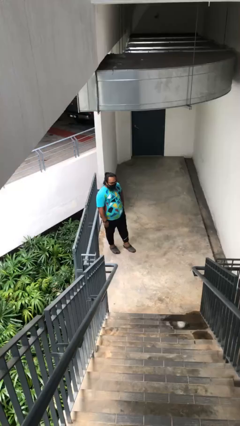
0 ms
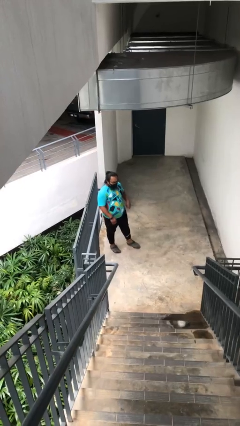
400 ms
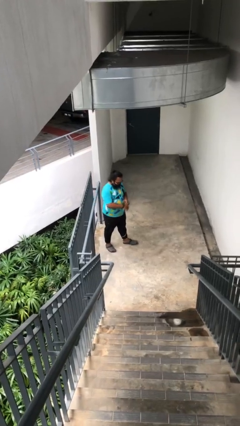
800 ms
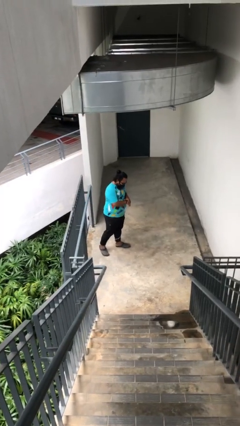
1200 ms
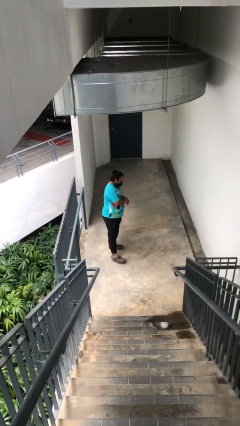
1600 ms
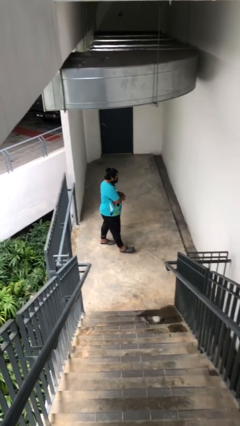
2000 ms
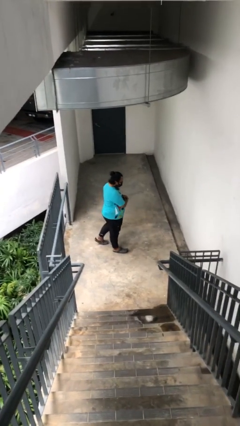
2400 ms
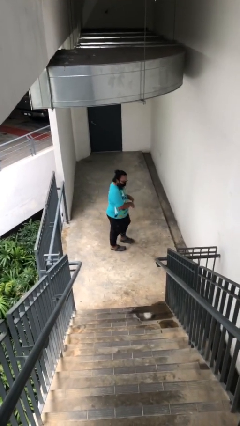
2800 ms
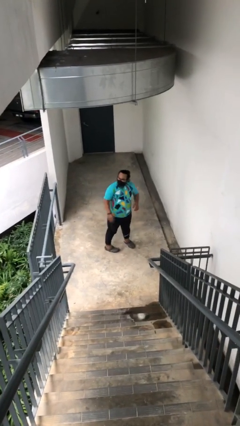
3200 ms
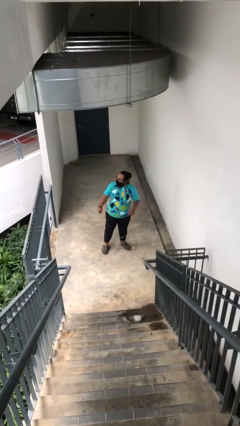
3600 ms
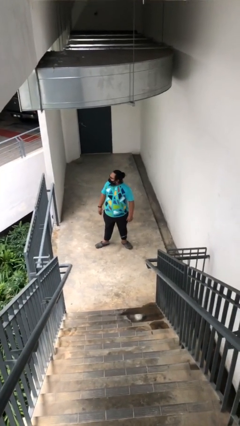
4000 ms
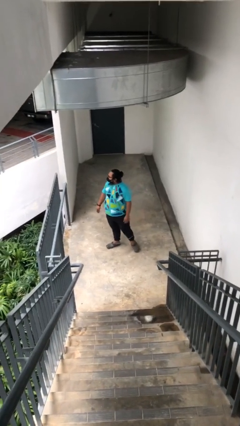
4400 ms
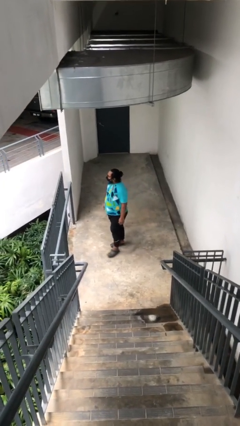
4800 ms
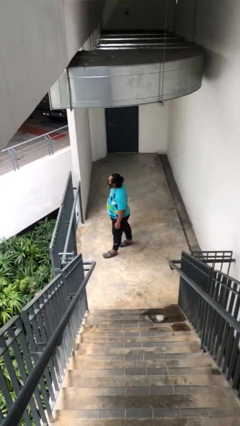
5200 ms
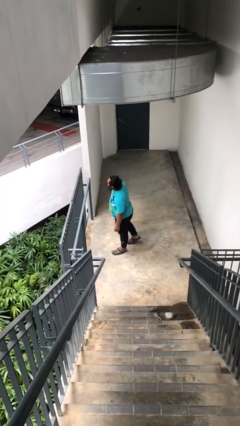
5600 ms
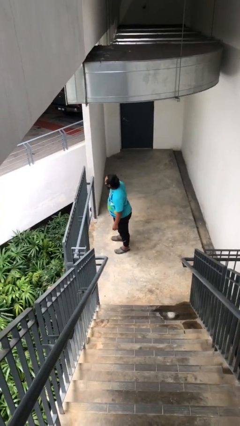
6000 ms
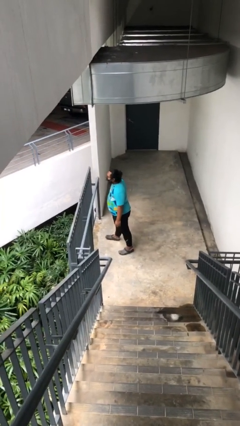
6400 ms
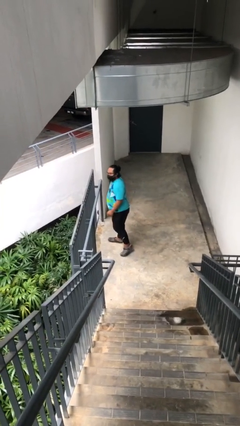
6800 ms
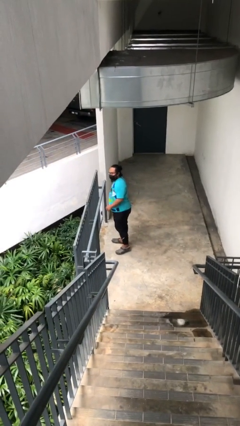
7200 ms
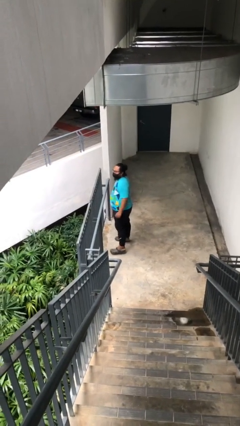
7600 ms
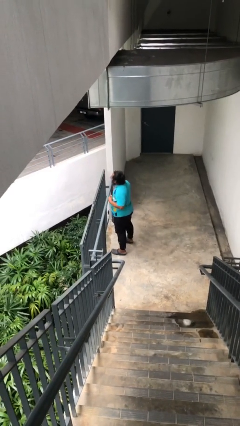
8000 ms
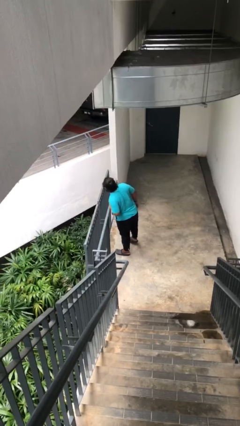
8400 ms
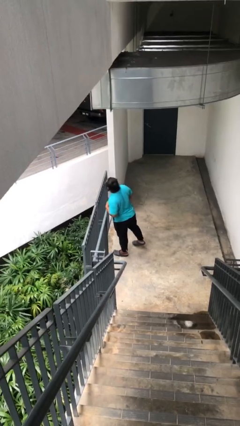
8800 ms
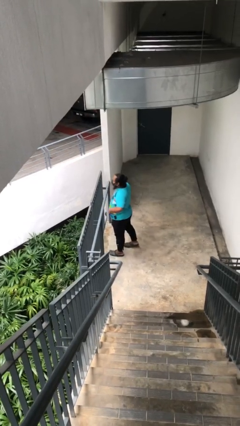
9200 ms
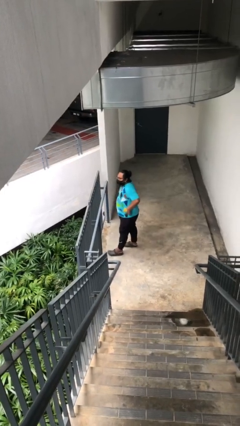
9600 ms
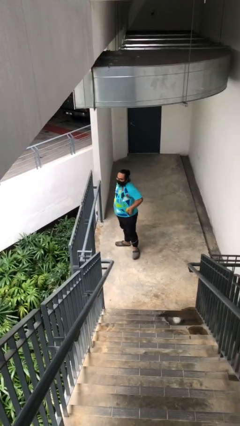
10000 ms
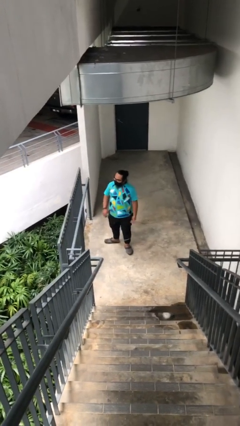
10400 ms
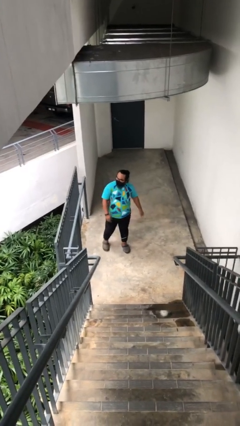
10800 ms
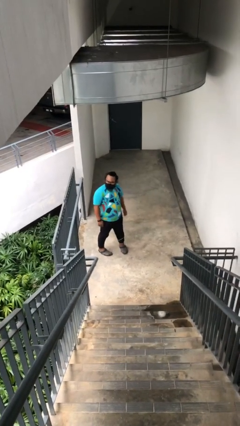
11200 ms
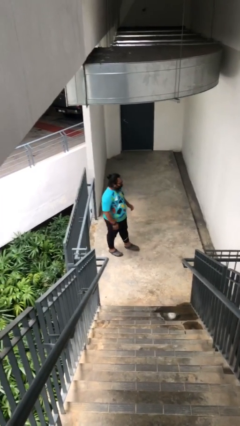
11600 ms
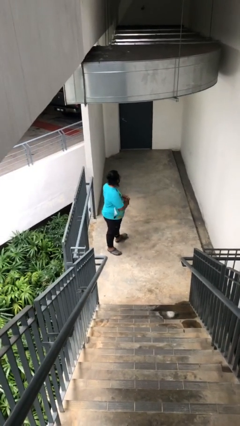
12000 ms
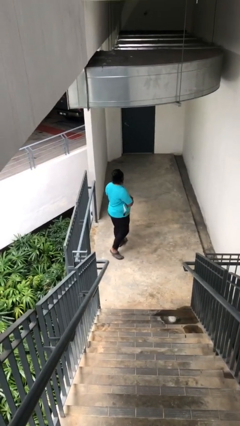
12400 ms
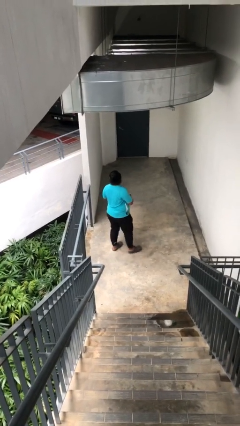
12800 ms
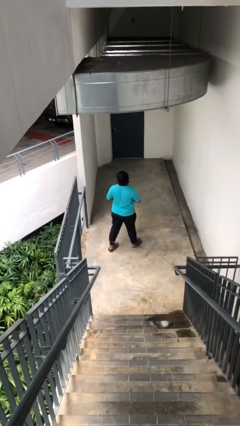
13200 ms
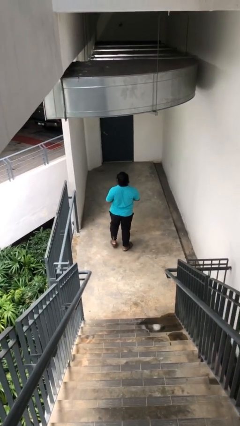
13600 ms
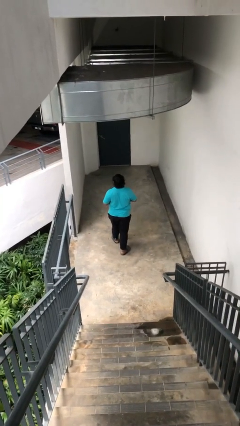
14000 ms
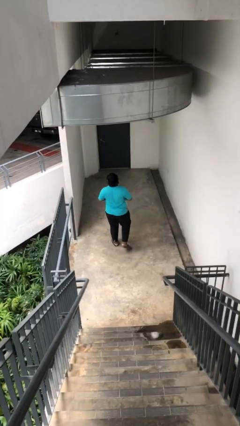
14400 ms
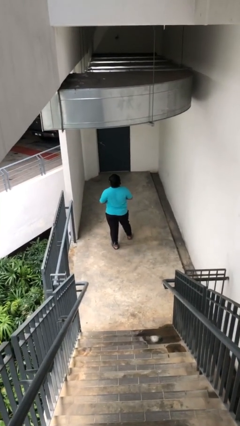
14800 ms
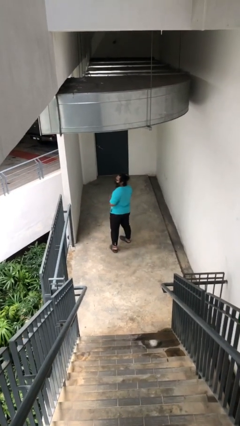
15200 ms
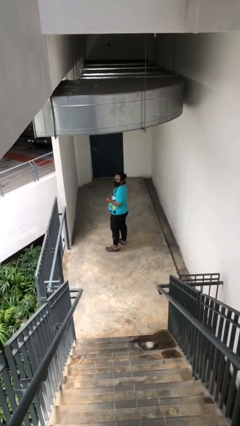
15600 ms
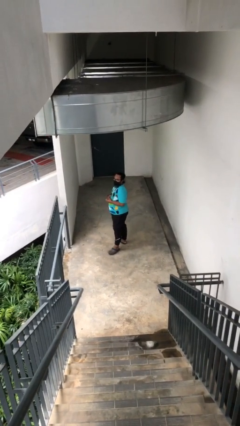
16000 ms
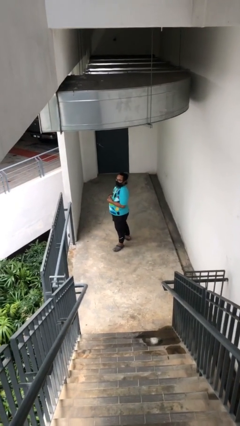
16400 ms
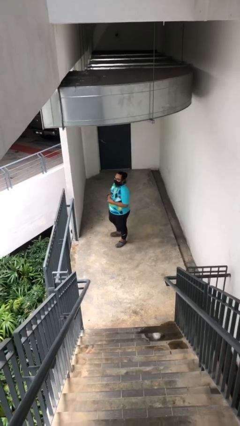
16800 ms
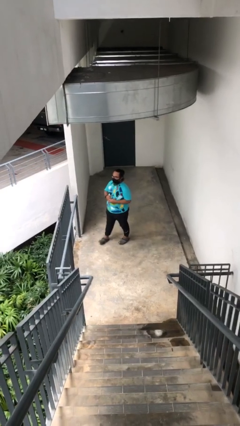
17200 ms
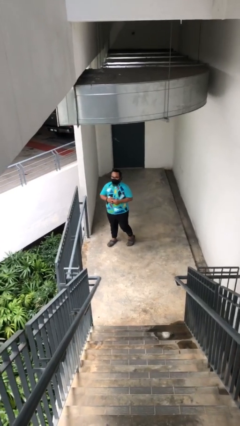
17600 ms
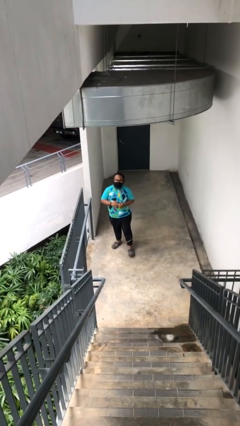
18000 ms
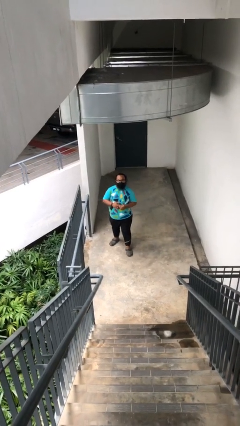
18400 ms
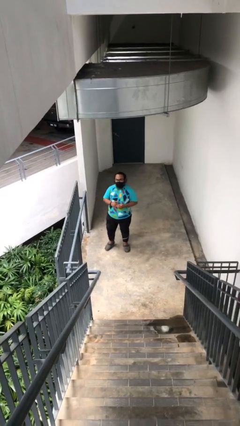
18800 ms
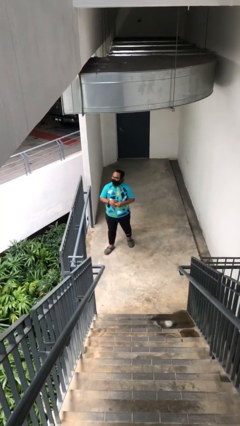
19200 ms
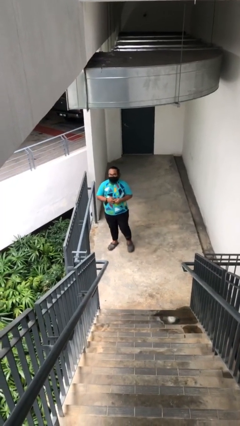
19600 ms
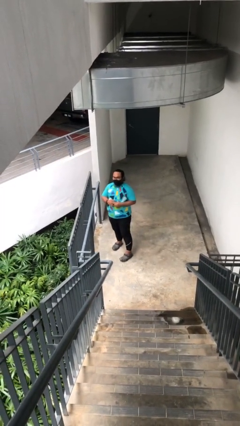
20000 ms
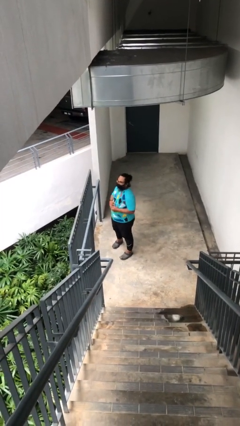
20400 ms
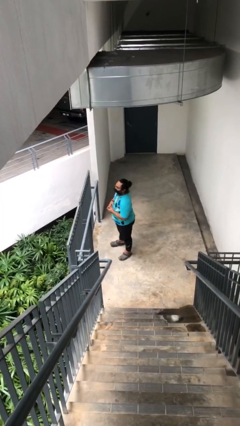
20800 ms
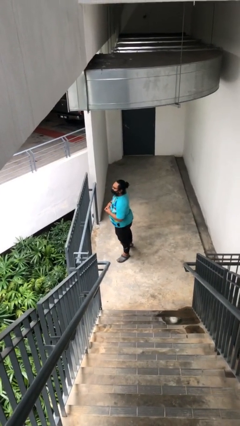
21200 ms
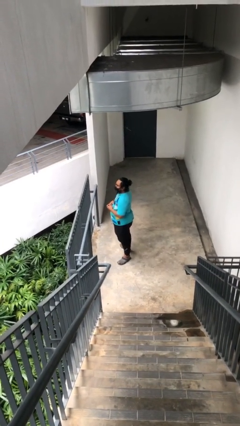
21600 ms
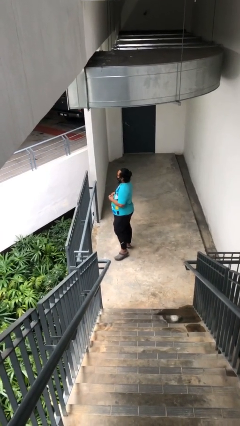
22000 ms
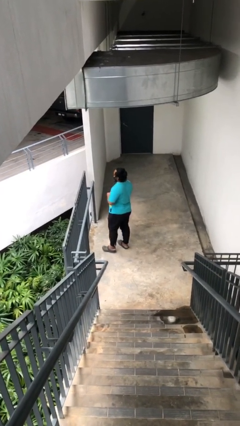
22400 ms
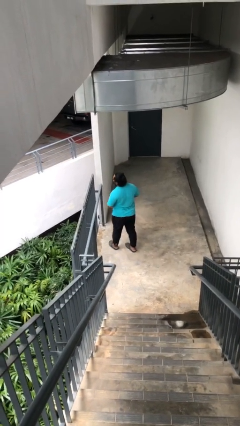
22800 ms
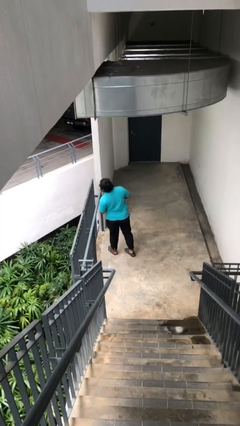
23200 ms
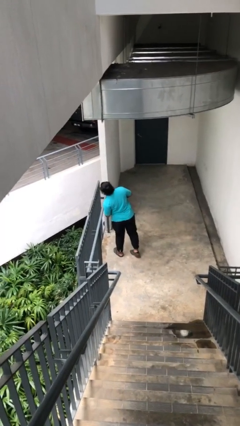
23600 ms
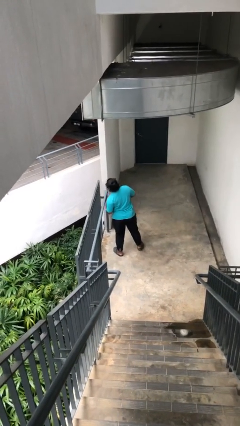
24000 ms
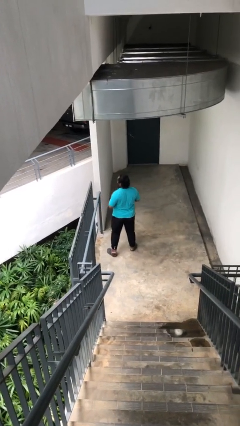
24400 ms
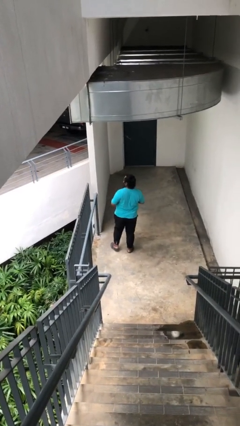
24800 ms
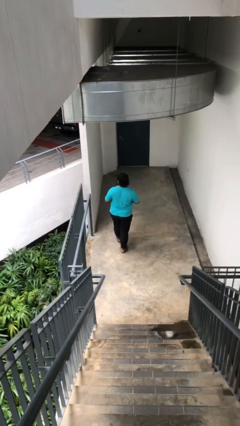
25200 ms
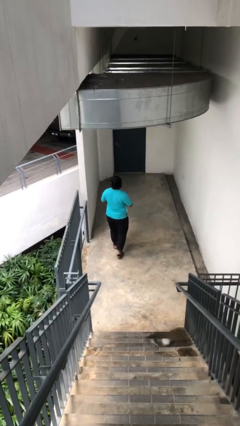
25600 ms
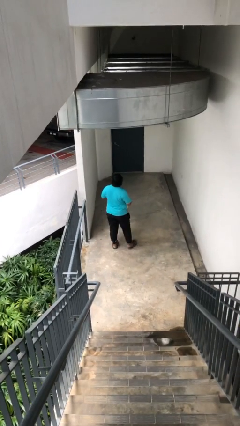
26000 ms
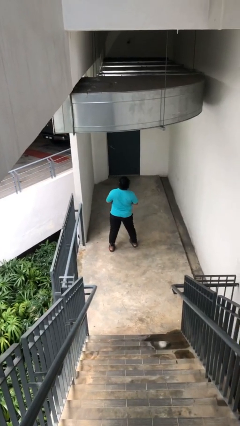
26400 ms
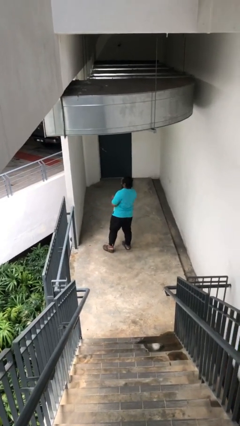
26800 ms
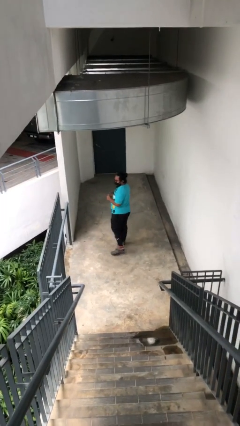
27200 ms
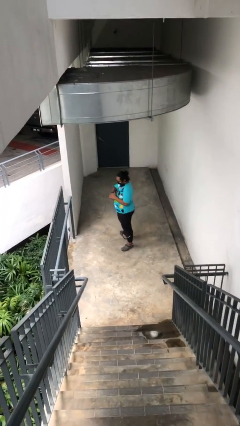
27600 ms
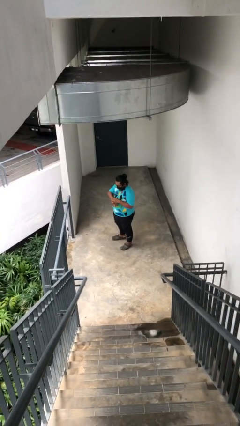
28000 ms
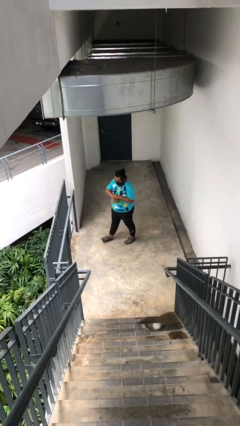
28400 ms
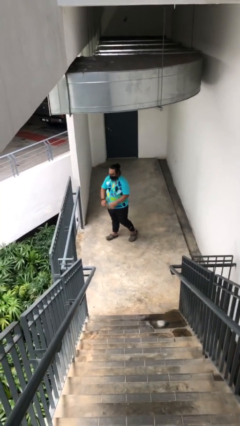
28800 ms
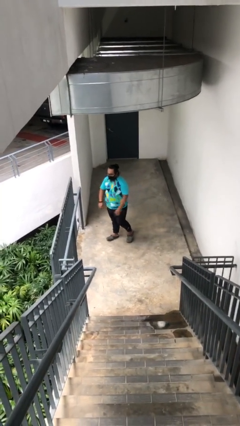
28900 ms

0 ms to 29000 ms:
person walks

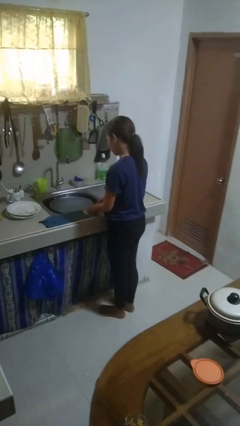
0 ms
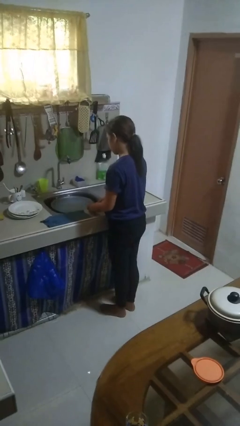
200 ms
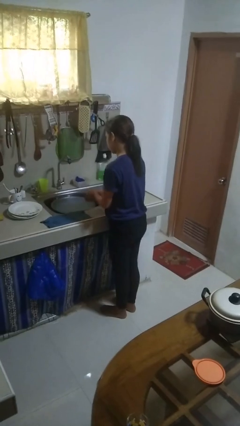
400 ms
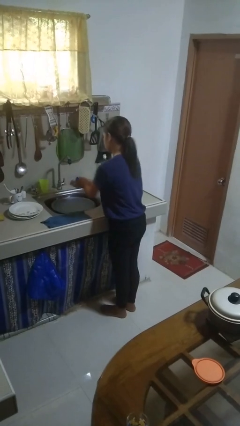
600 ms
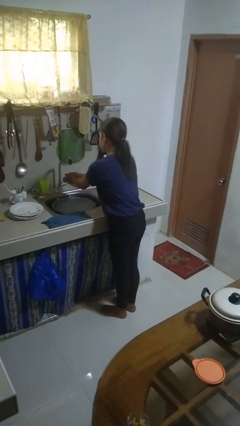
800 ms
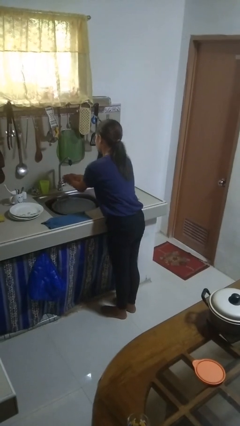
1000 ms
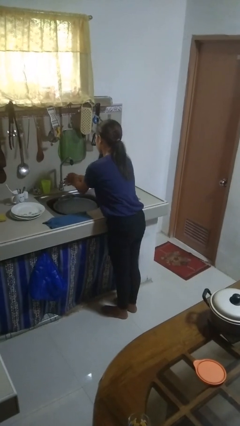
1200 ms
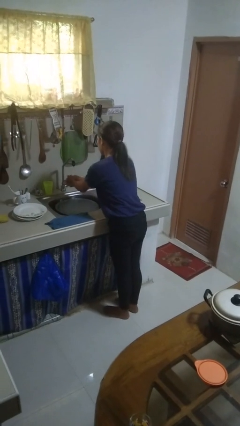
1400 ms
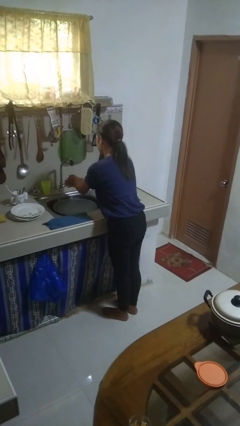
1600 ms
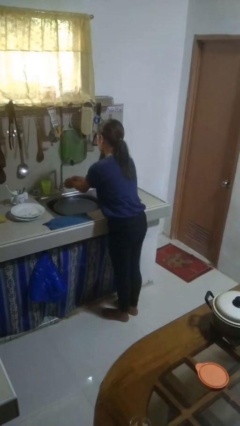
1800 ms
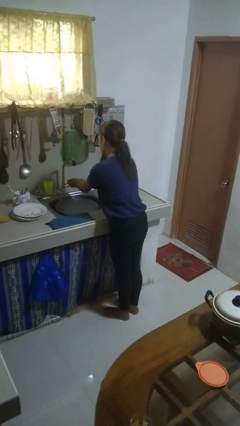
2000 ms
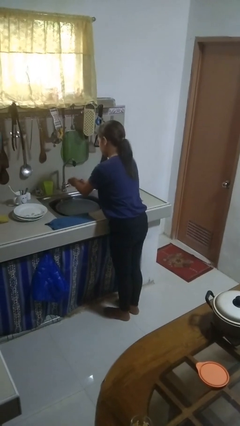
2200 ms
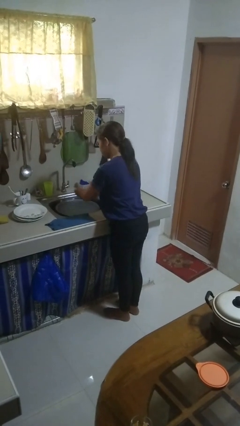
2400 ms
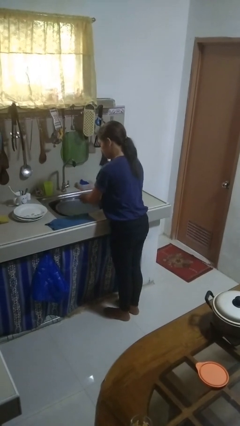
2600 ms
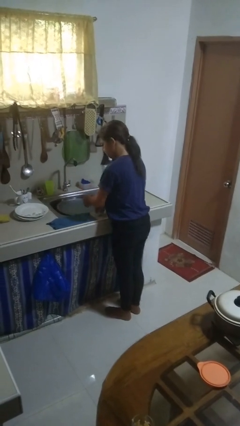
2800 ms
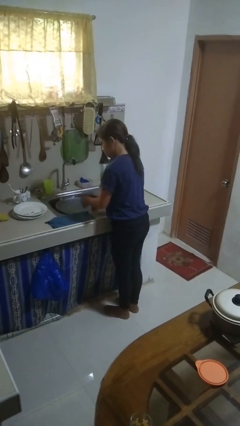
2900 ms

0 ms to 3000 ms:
person washes hands

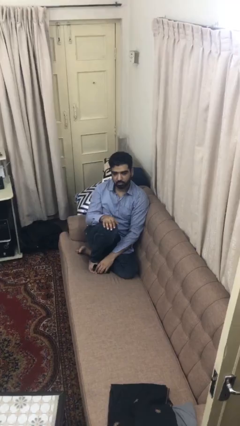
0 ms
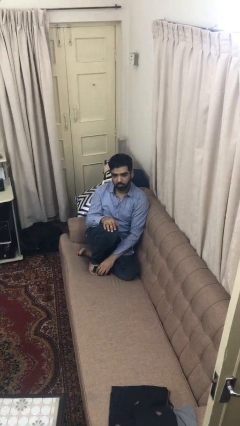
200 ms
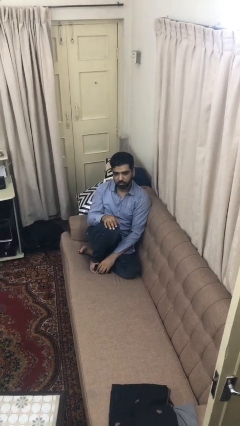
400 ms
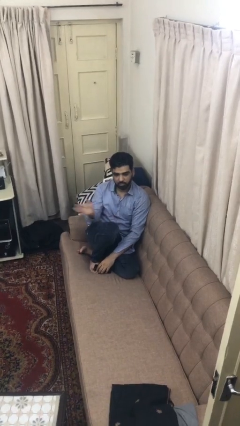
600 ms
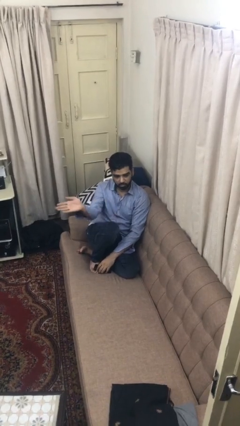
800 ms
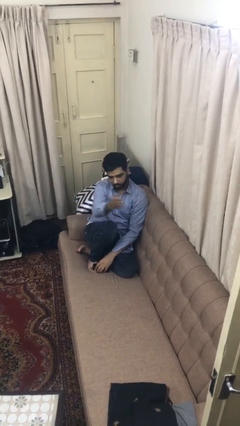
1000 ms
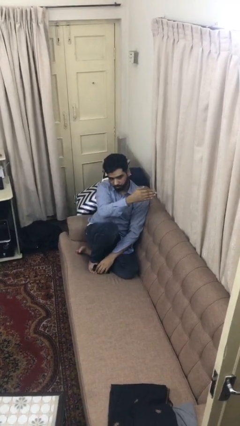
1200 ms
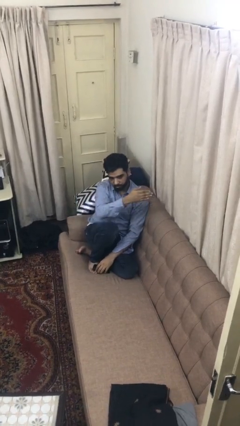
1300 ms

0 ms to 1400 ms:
person gestures swipe left
